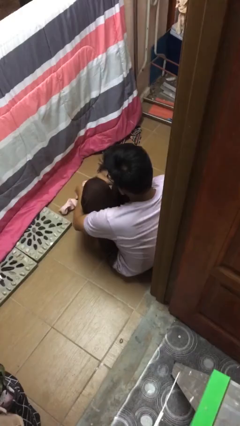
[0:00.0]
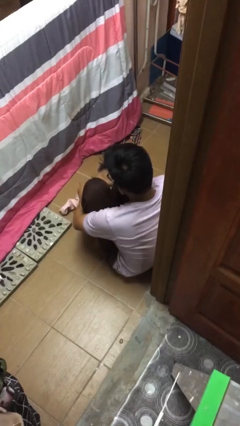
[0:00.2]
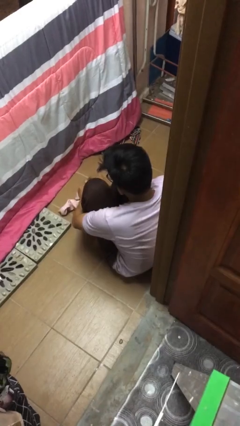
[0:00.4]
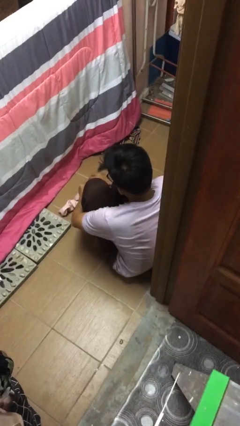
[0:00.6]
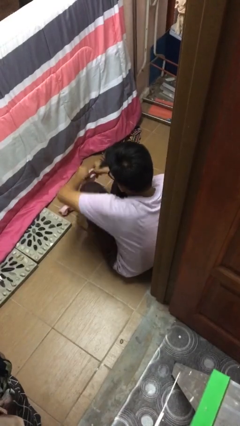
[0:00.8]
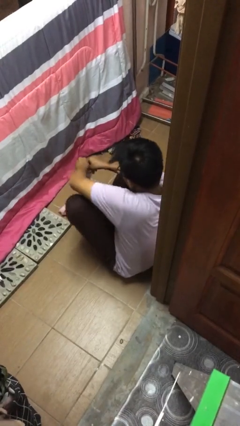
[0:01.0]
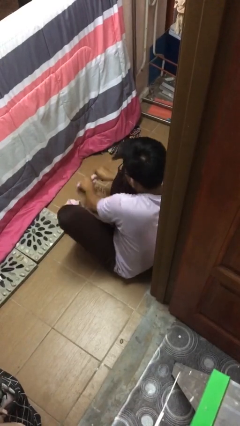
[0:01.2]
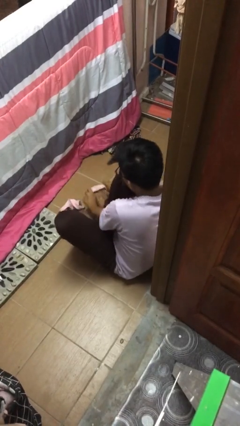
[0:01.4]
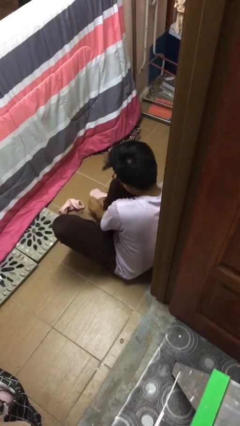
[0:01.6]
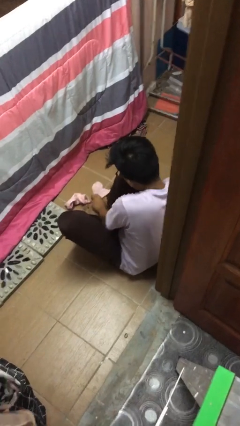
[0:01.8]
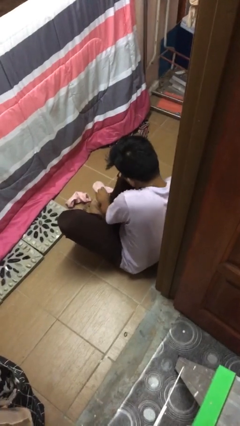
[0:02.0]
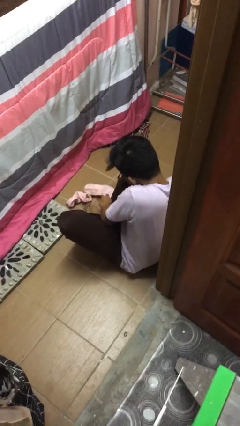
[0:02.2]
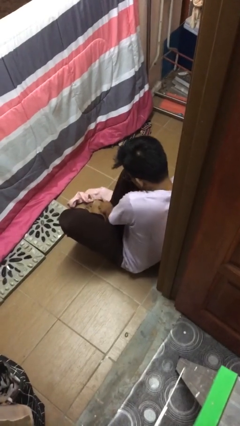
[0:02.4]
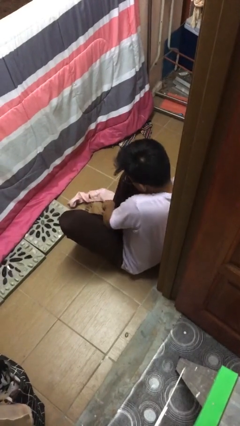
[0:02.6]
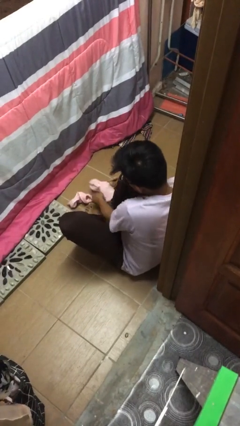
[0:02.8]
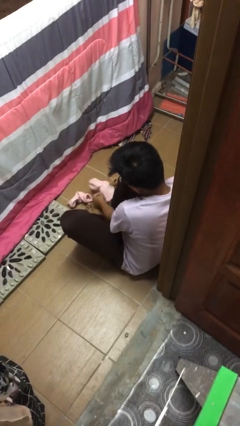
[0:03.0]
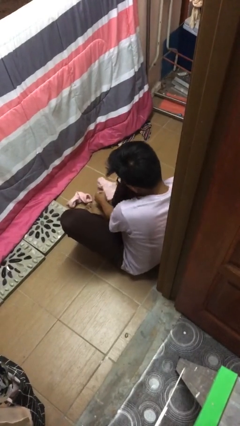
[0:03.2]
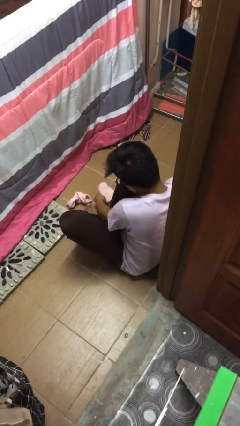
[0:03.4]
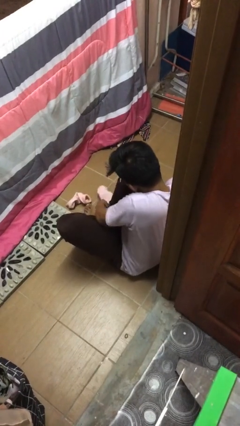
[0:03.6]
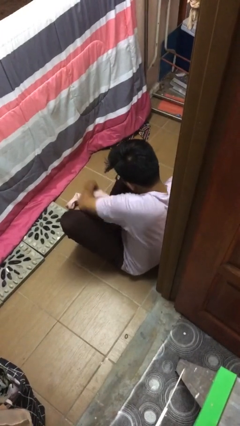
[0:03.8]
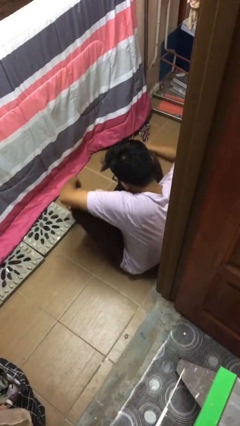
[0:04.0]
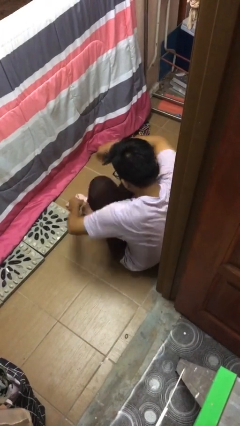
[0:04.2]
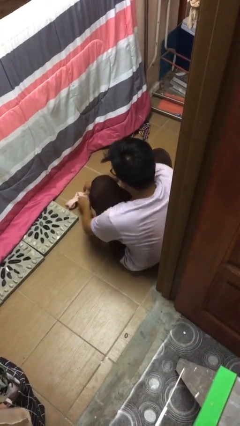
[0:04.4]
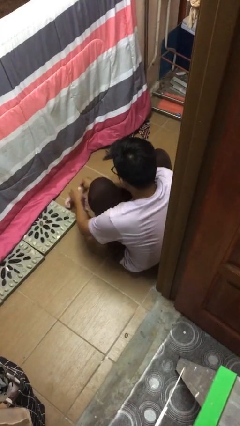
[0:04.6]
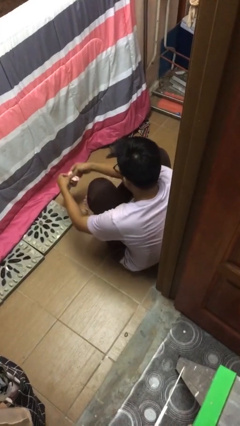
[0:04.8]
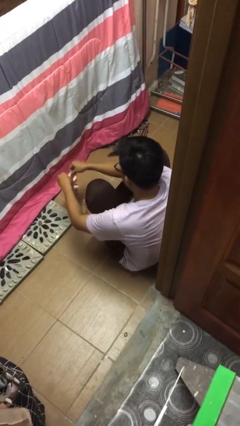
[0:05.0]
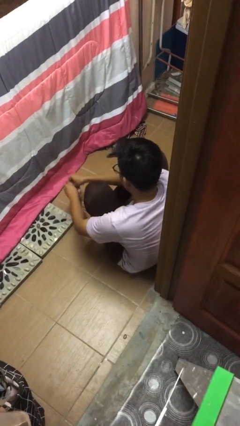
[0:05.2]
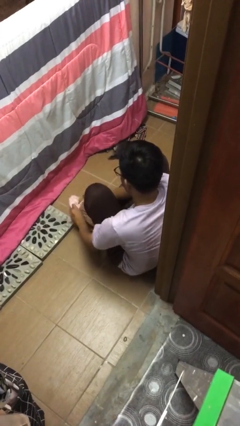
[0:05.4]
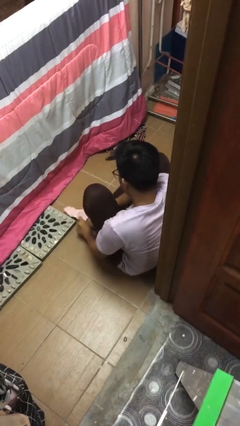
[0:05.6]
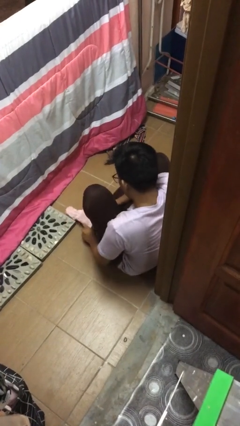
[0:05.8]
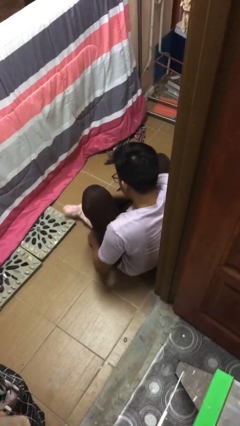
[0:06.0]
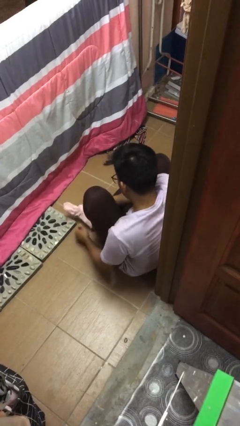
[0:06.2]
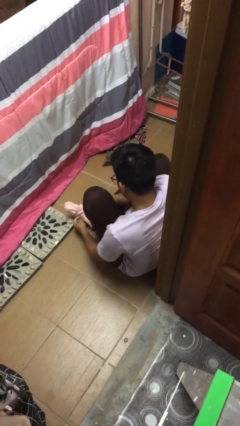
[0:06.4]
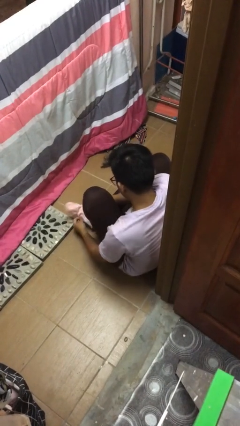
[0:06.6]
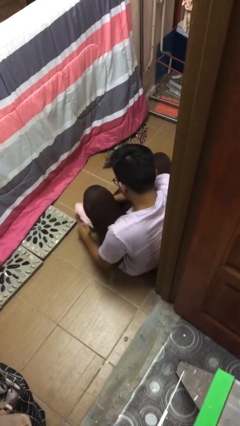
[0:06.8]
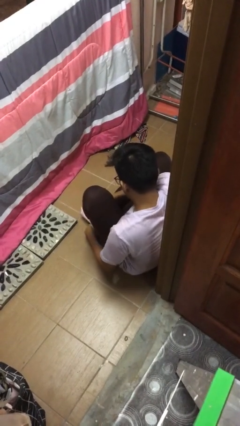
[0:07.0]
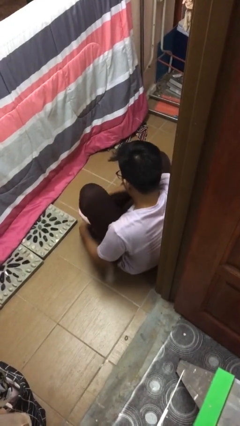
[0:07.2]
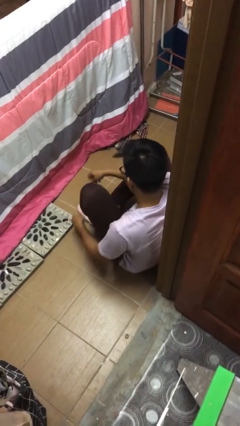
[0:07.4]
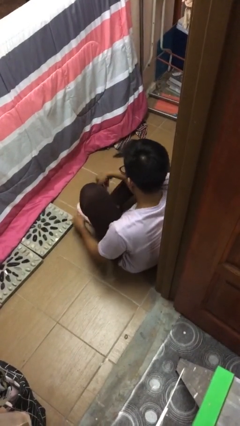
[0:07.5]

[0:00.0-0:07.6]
person puts on socks

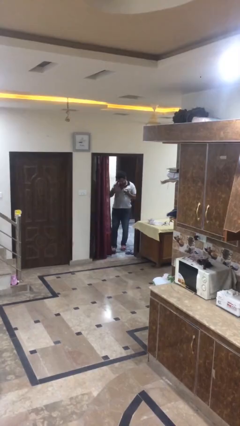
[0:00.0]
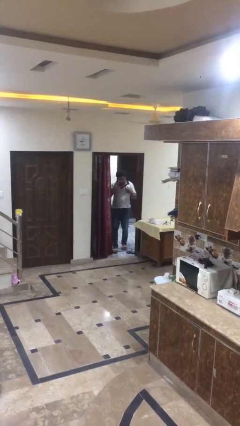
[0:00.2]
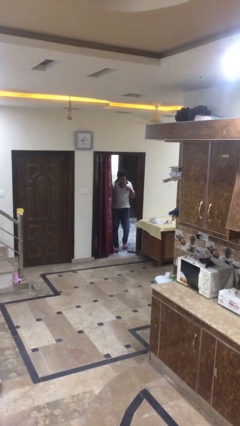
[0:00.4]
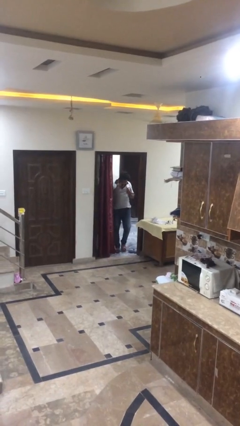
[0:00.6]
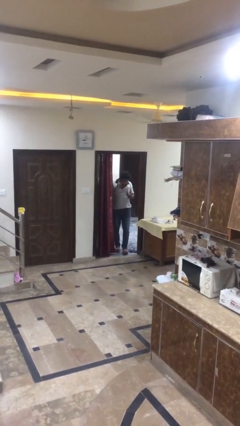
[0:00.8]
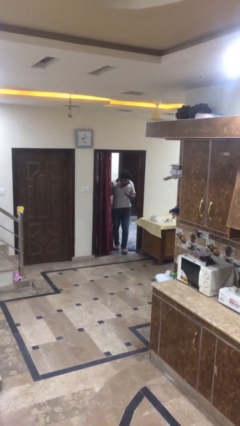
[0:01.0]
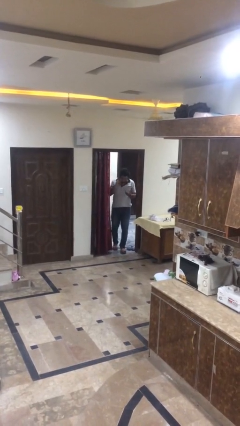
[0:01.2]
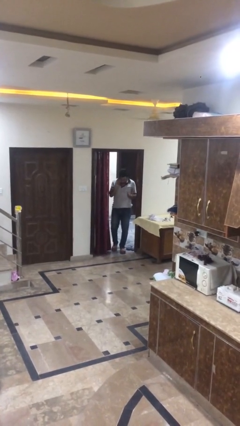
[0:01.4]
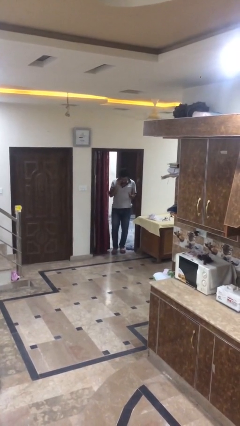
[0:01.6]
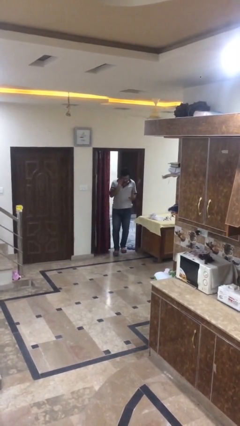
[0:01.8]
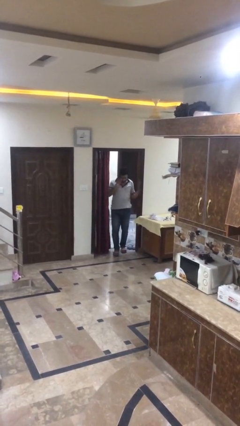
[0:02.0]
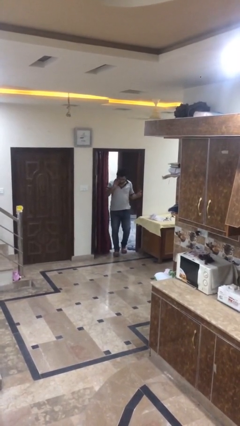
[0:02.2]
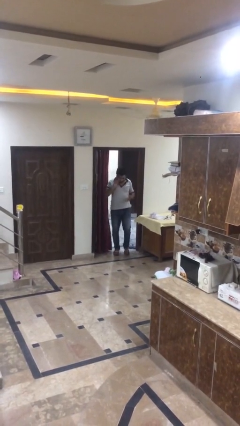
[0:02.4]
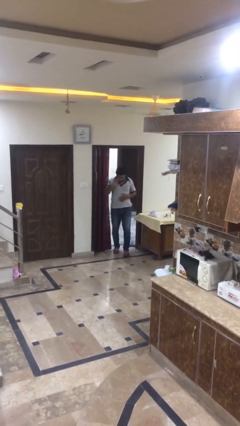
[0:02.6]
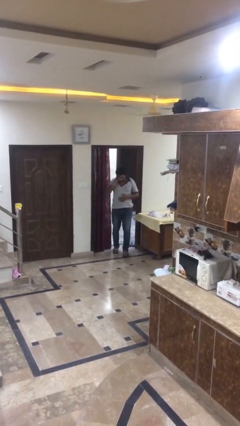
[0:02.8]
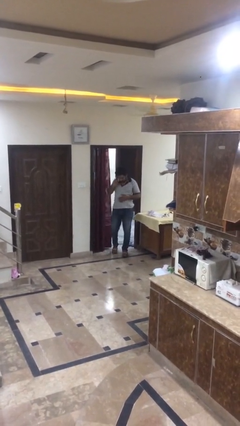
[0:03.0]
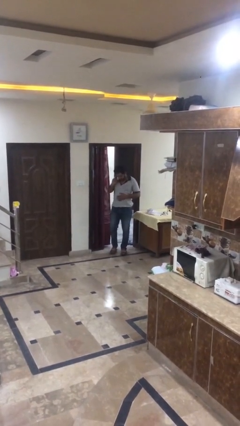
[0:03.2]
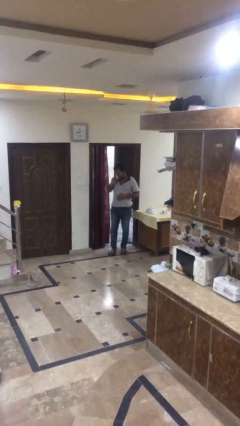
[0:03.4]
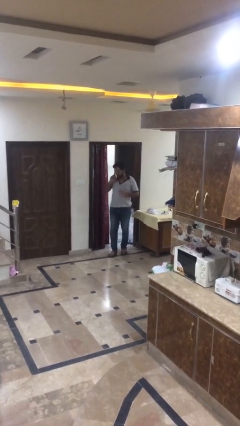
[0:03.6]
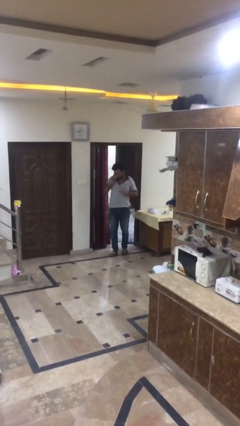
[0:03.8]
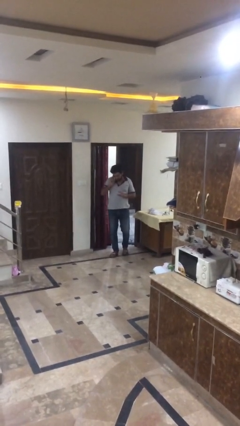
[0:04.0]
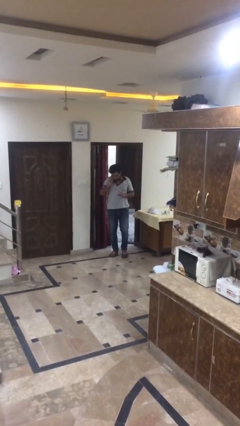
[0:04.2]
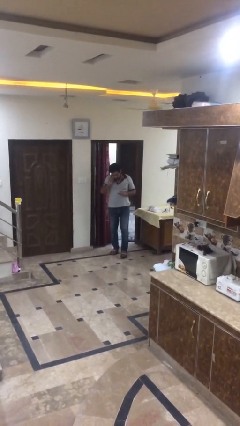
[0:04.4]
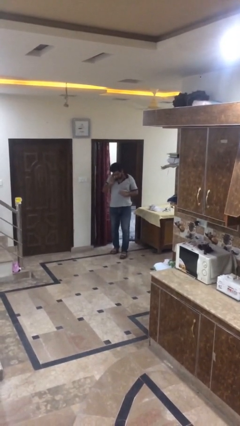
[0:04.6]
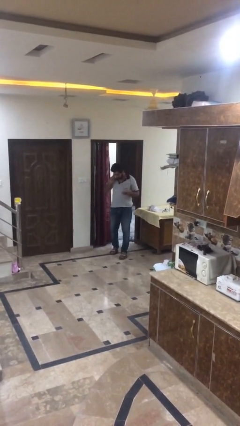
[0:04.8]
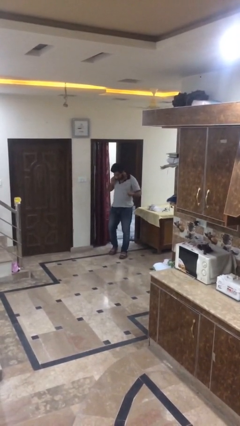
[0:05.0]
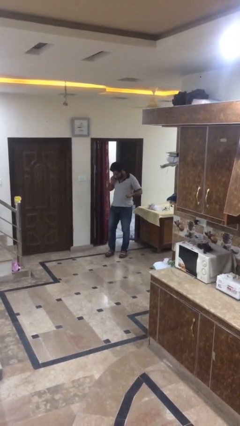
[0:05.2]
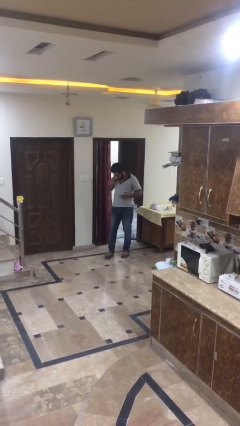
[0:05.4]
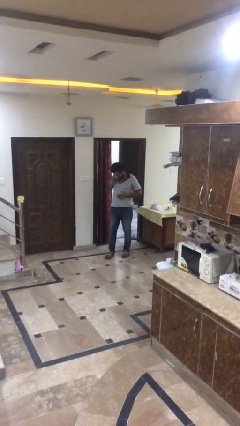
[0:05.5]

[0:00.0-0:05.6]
person enters scene through structure

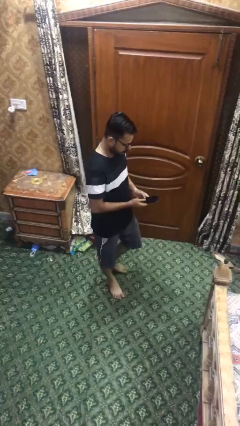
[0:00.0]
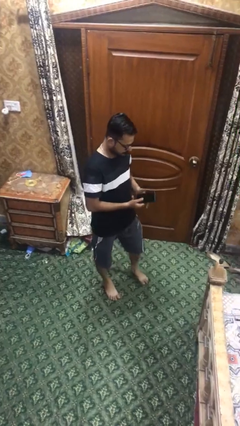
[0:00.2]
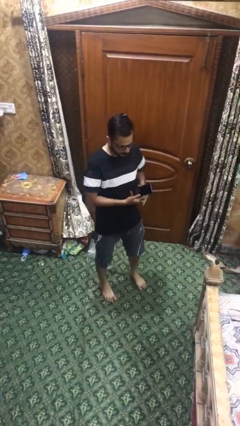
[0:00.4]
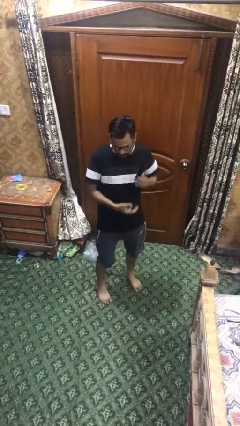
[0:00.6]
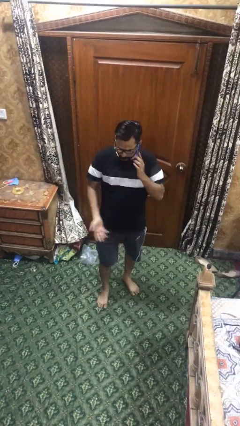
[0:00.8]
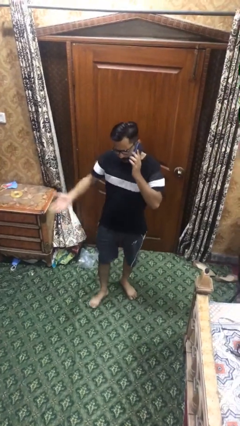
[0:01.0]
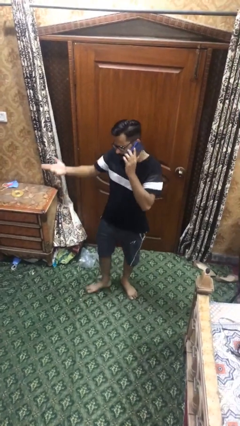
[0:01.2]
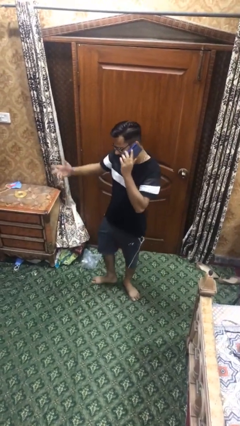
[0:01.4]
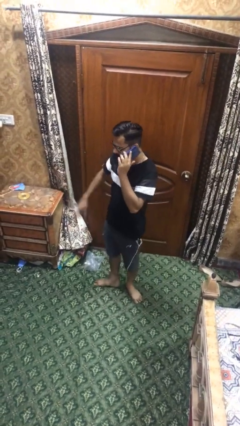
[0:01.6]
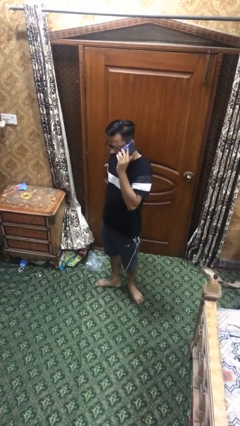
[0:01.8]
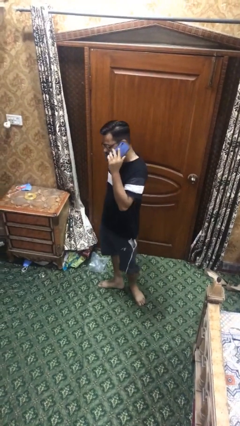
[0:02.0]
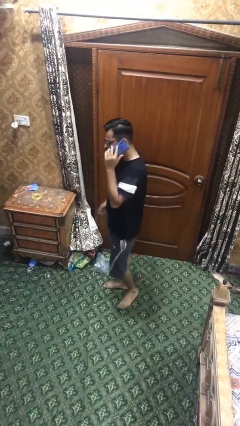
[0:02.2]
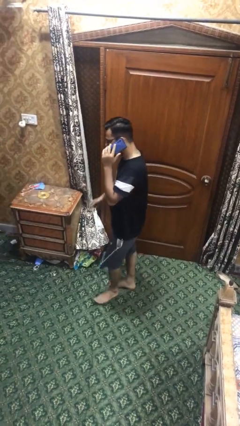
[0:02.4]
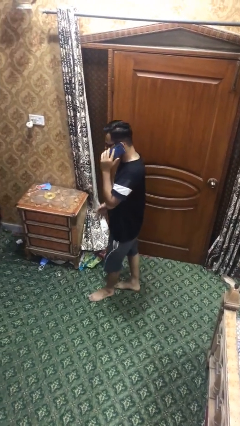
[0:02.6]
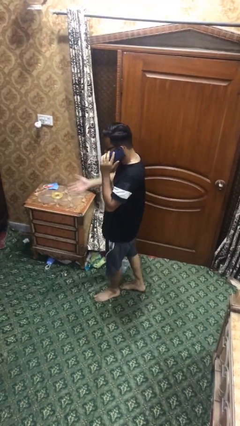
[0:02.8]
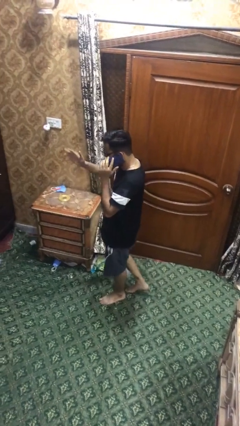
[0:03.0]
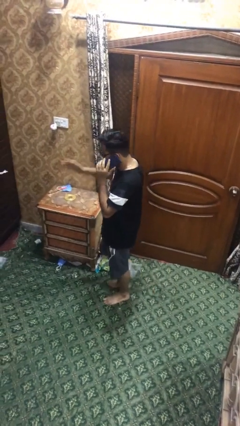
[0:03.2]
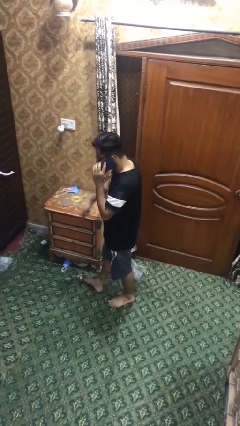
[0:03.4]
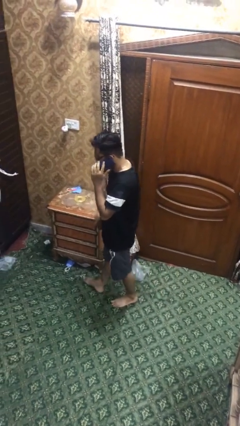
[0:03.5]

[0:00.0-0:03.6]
person talks on phone

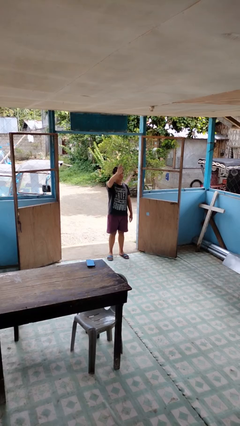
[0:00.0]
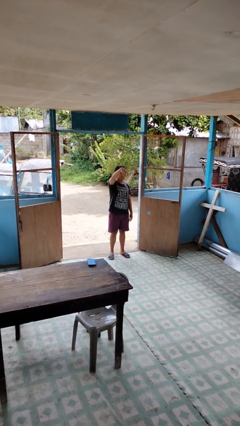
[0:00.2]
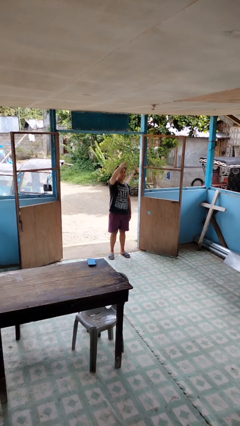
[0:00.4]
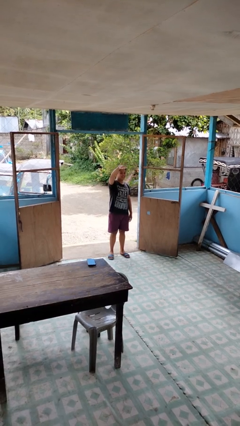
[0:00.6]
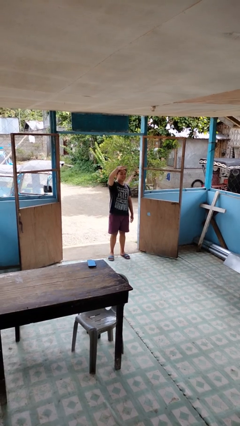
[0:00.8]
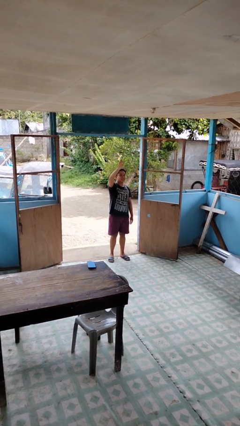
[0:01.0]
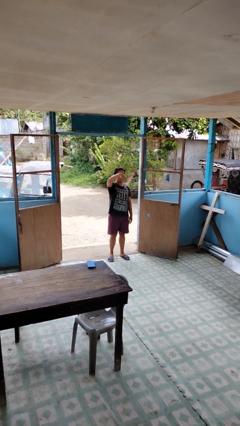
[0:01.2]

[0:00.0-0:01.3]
person gestures come here
